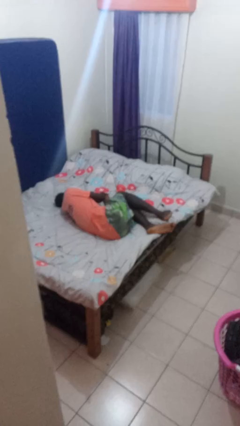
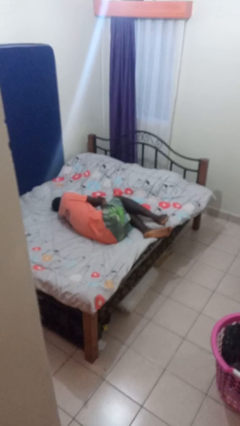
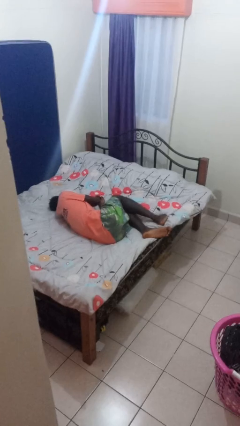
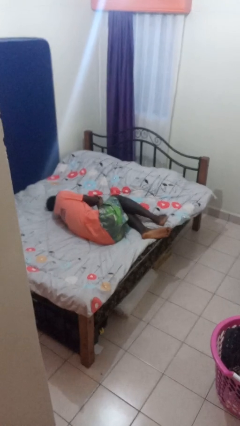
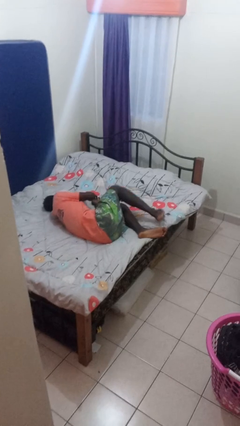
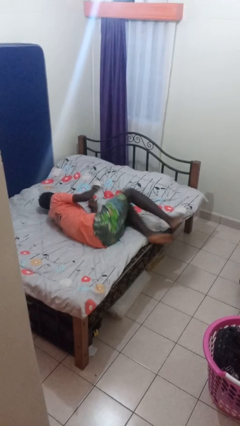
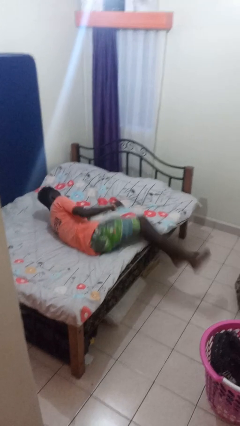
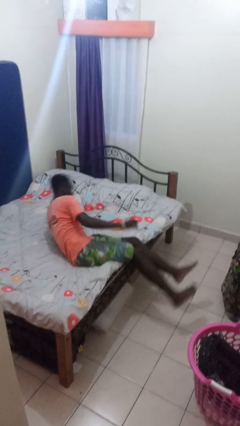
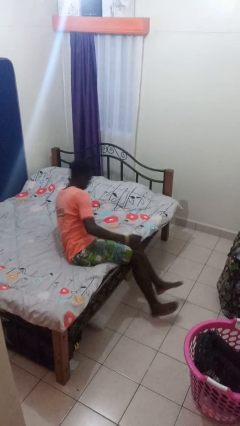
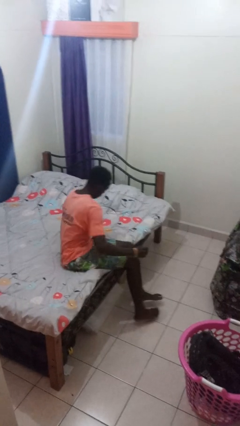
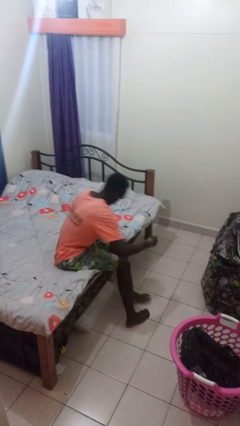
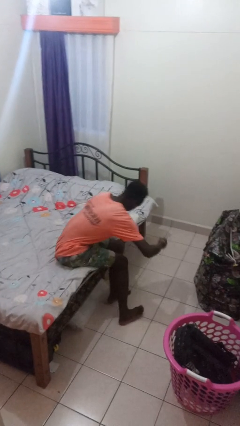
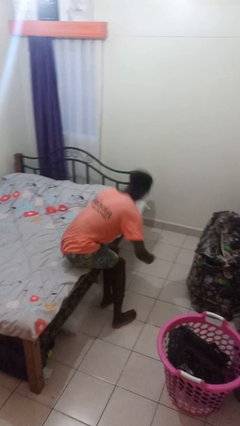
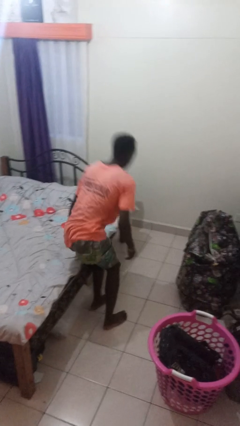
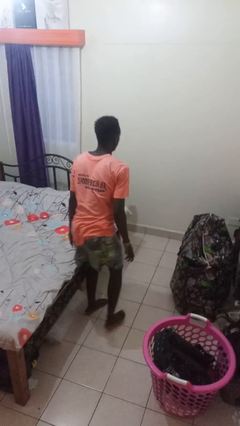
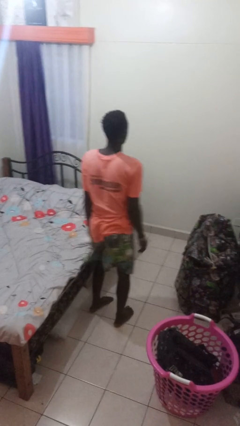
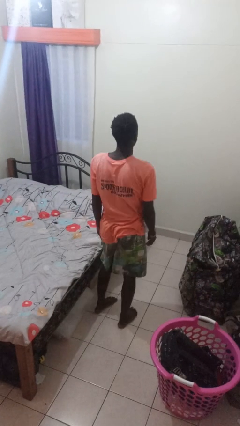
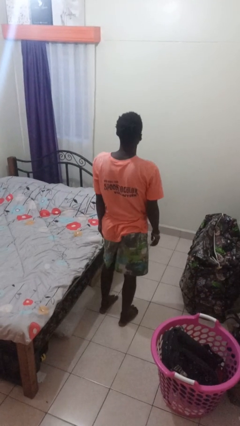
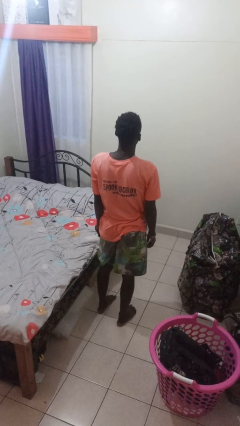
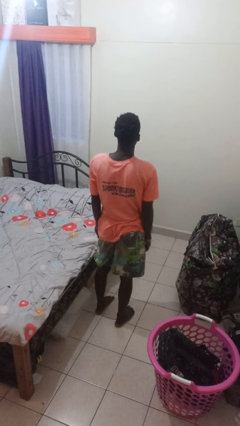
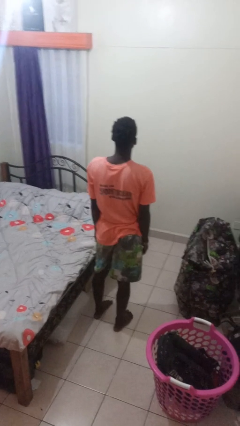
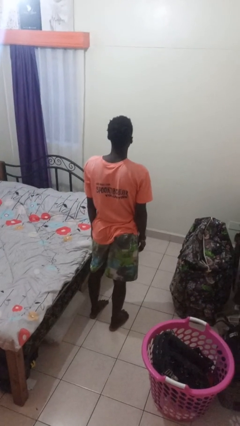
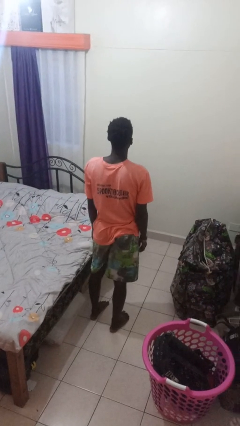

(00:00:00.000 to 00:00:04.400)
person stands up

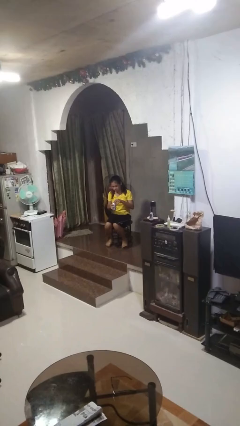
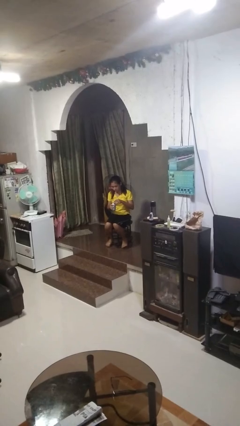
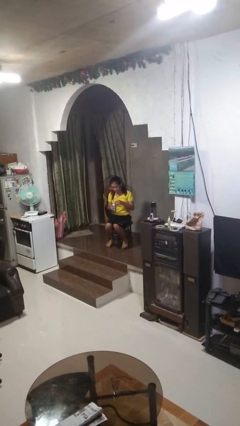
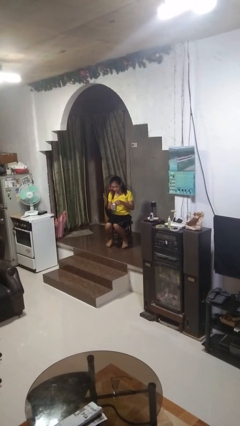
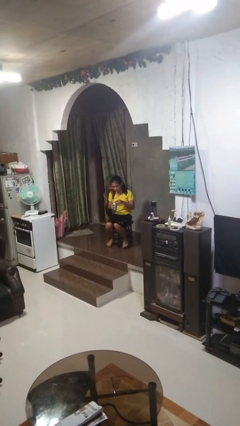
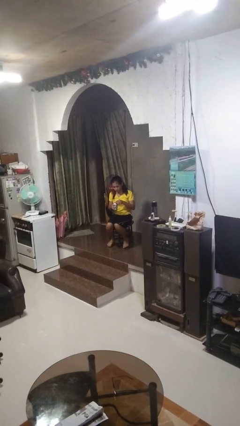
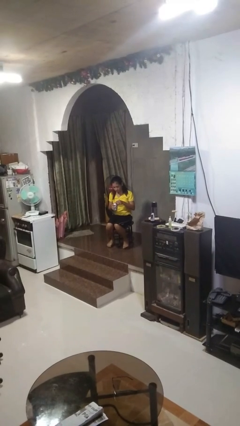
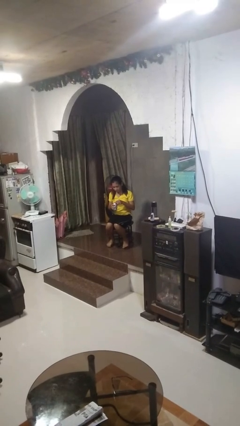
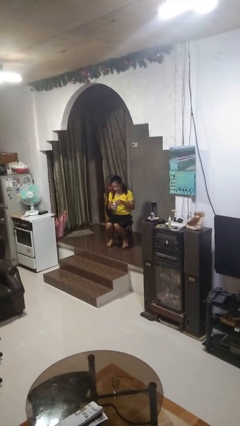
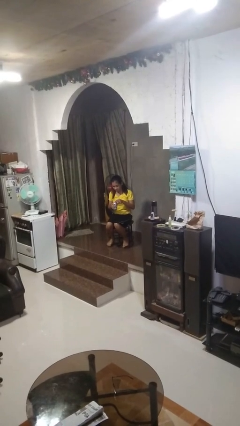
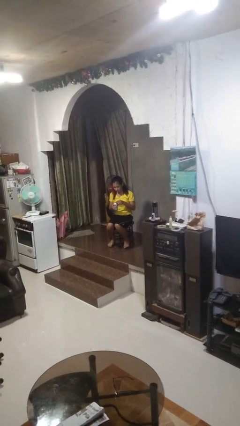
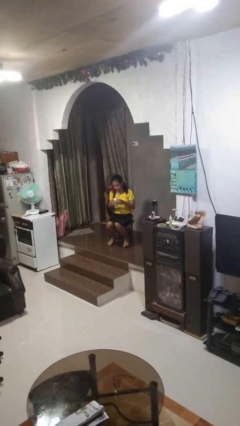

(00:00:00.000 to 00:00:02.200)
person opens beverage can

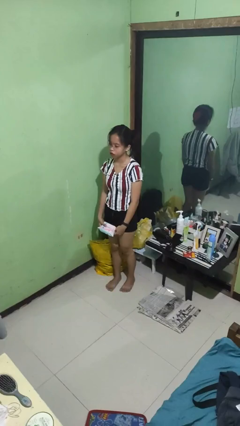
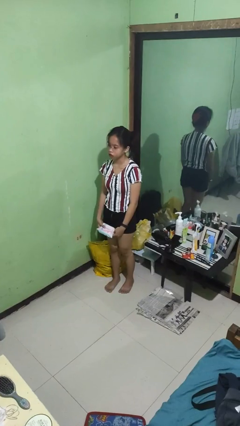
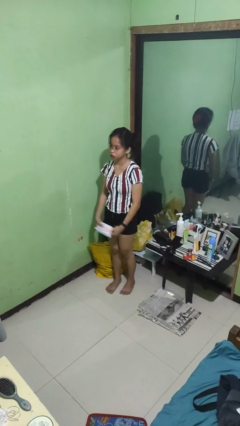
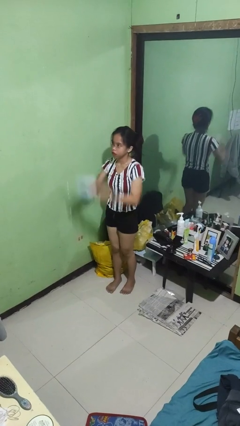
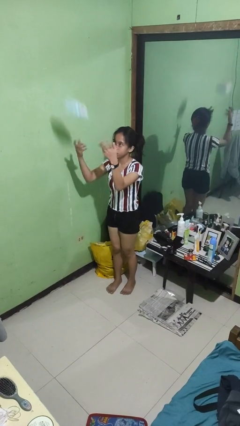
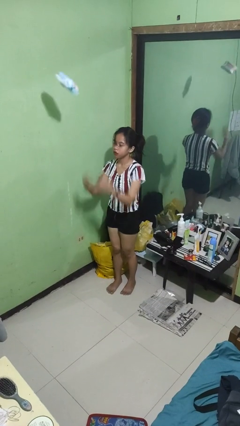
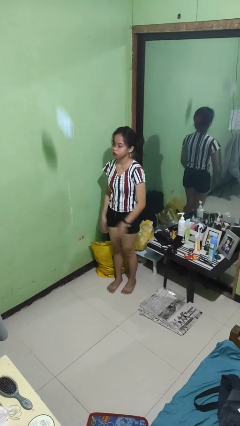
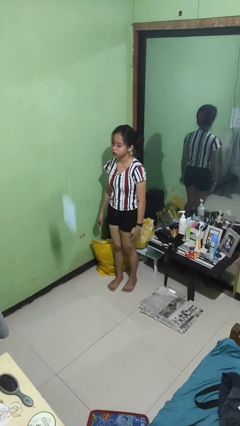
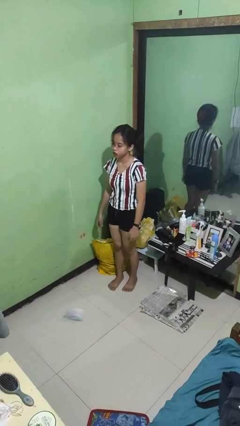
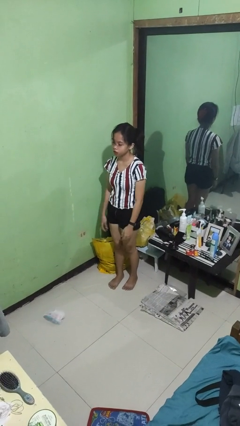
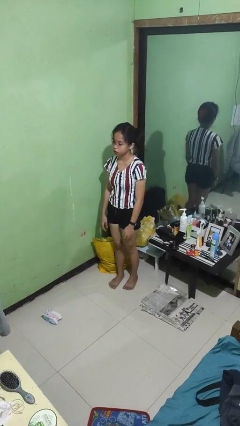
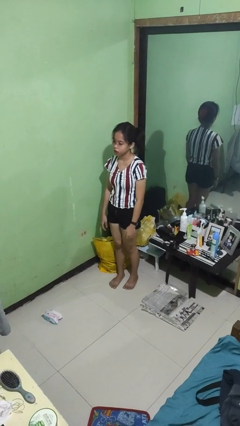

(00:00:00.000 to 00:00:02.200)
person throws object into air

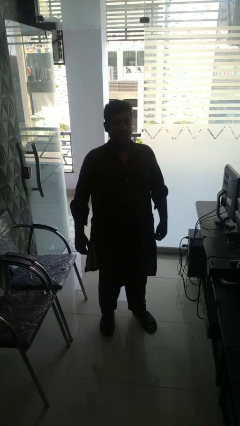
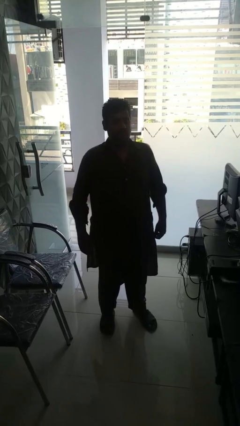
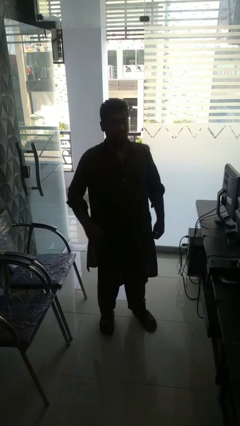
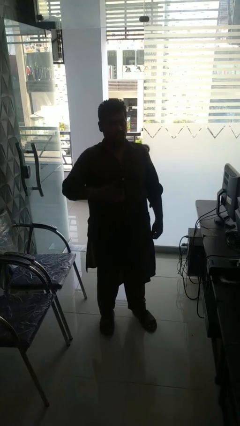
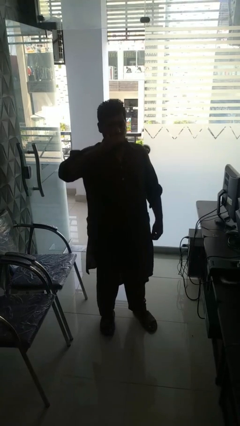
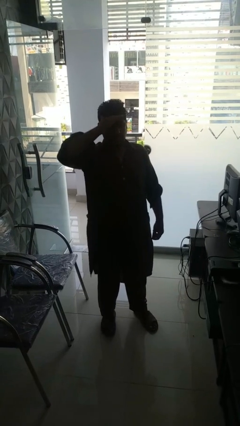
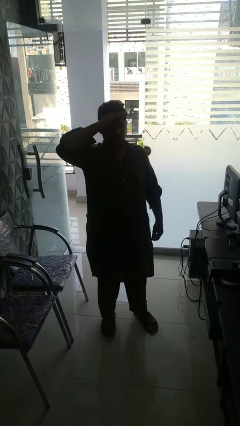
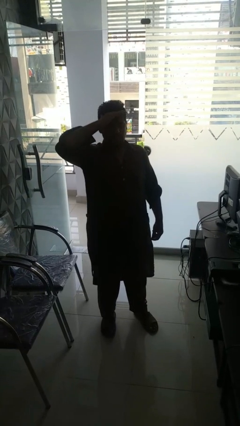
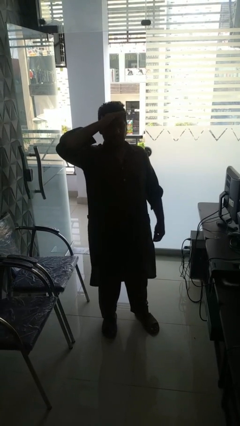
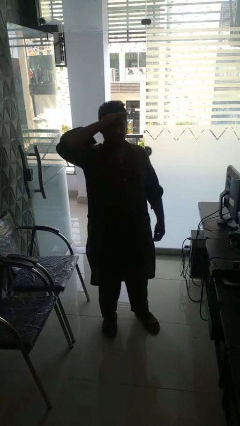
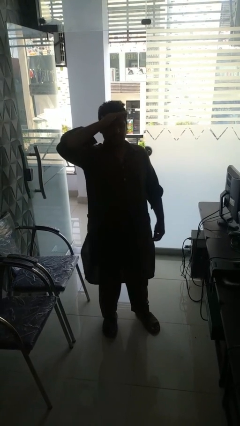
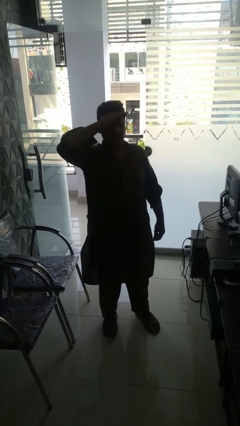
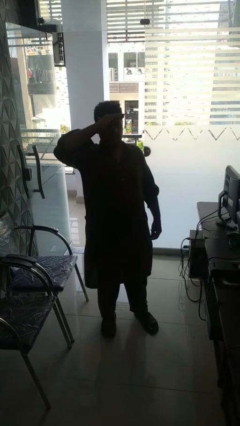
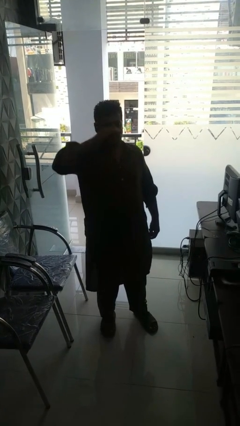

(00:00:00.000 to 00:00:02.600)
person shades eyes

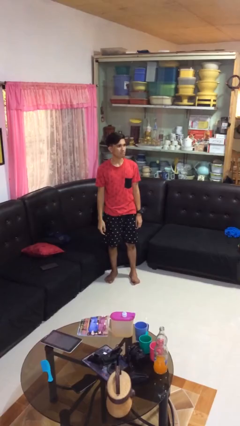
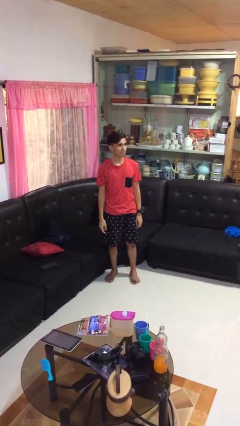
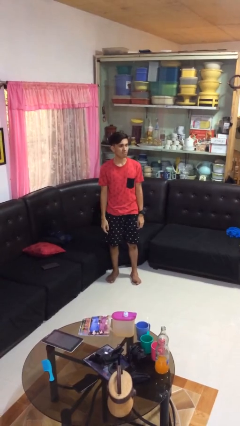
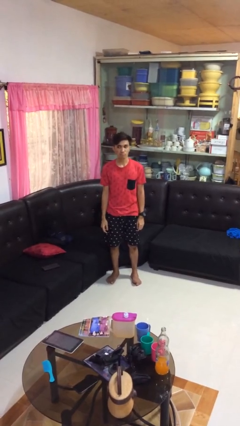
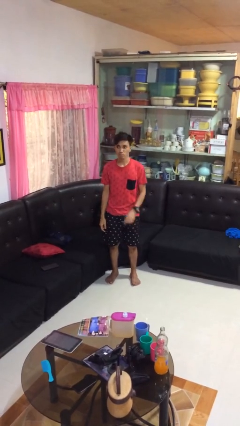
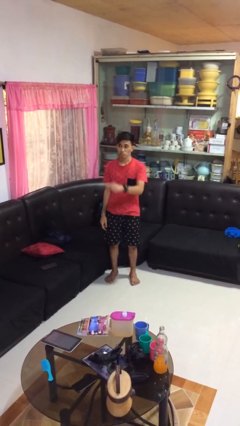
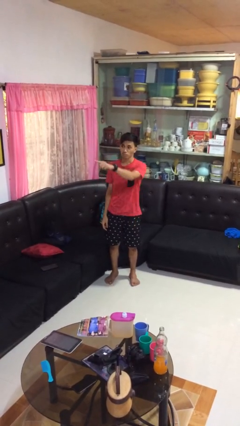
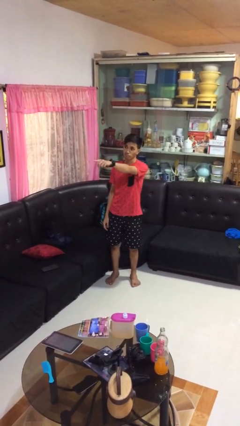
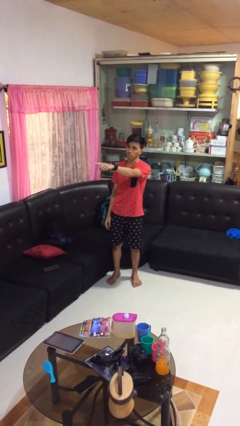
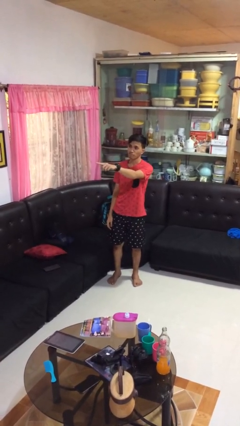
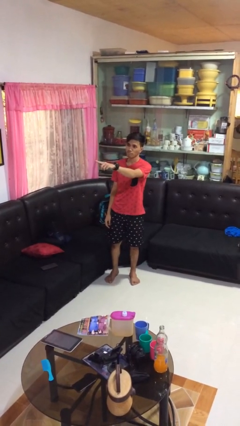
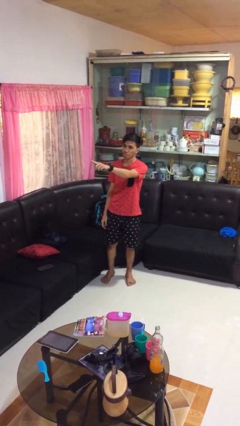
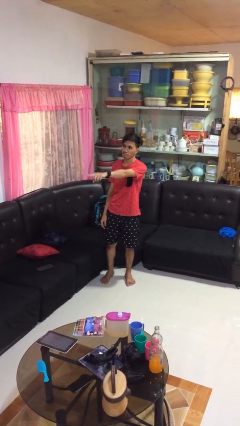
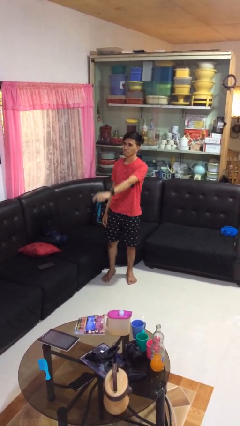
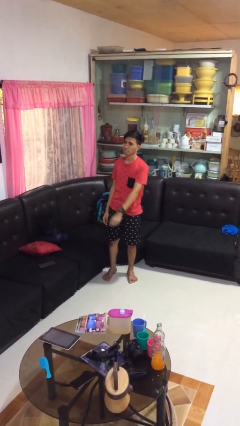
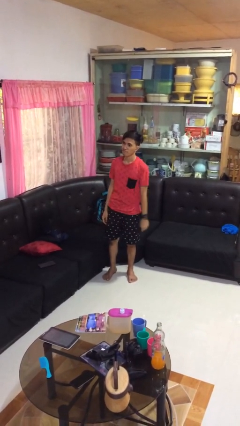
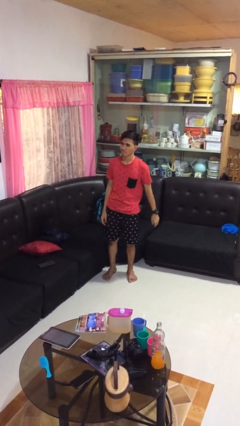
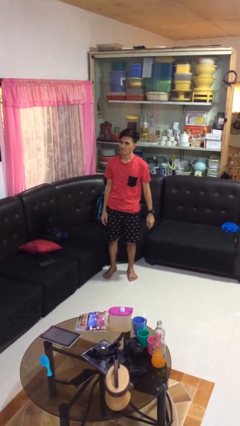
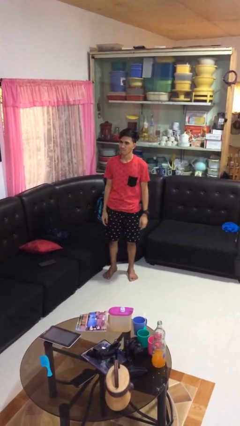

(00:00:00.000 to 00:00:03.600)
person points at person

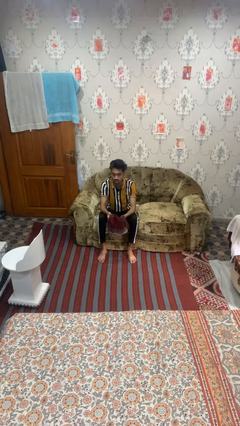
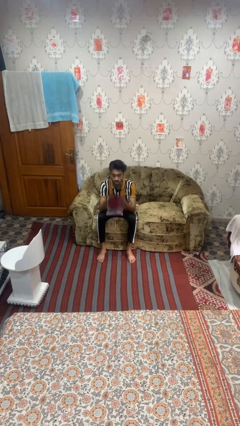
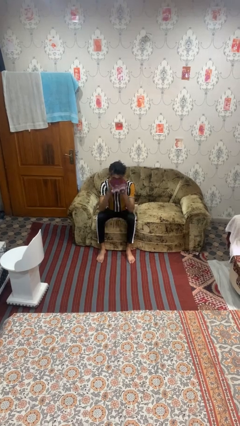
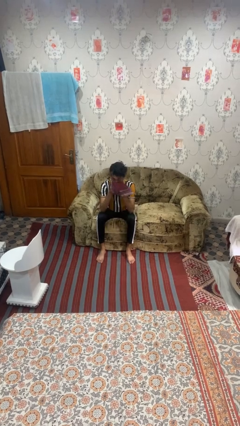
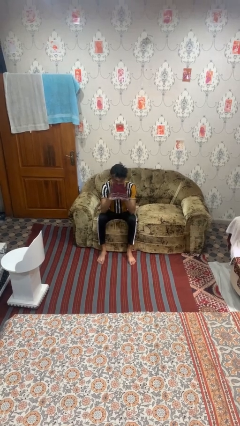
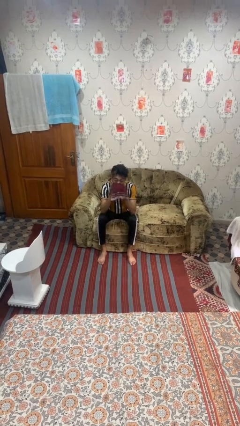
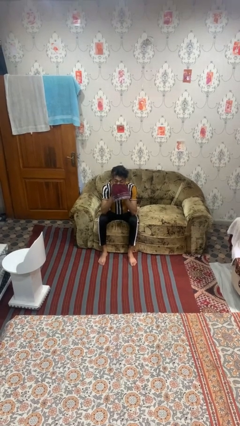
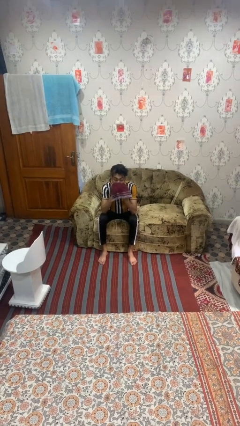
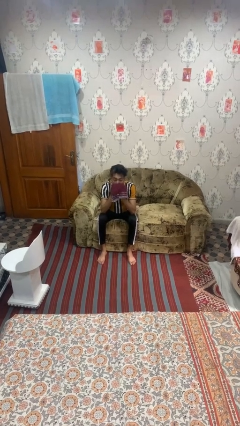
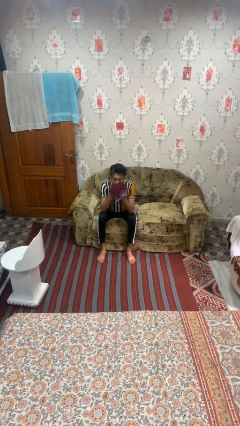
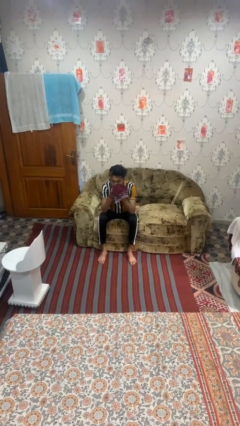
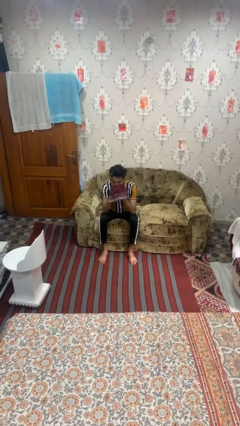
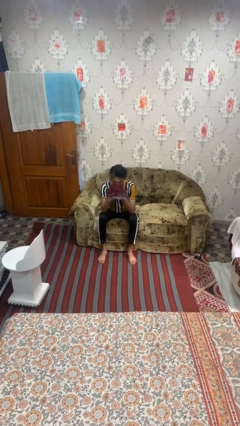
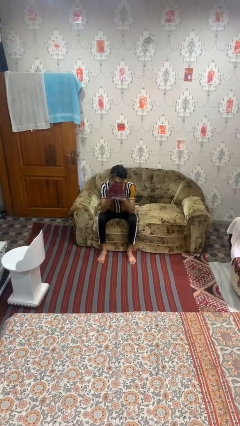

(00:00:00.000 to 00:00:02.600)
person blows nose
